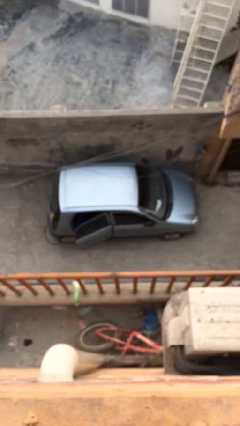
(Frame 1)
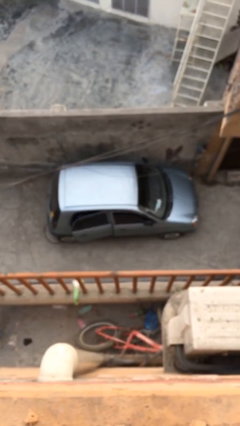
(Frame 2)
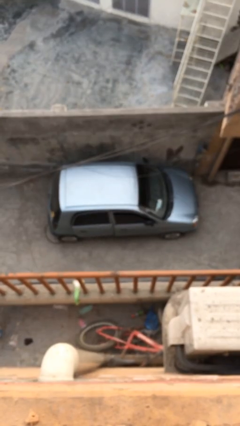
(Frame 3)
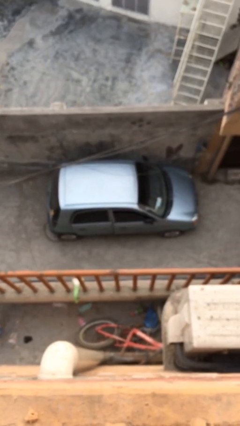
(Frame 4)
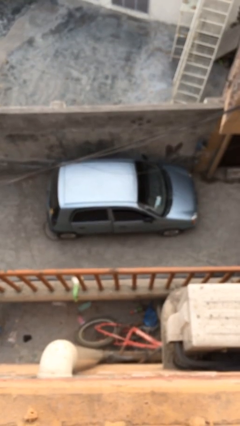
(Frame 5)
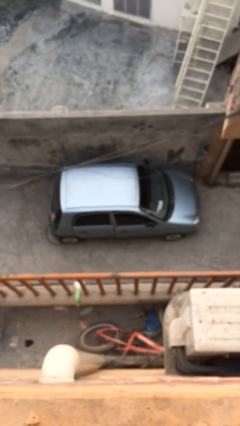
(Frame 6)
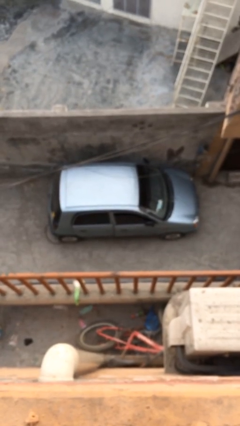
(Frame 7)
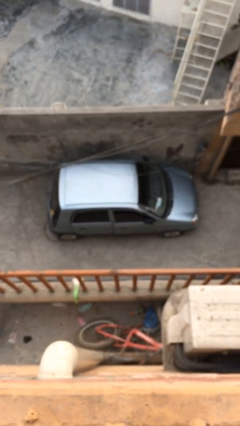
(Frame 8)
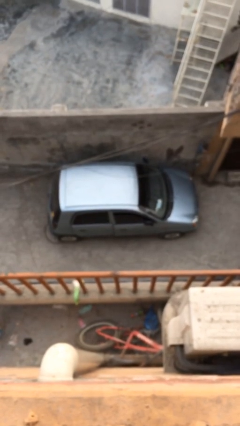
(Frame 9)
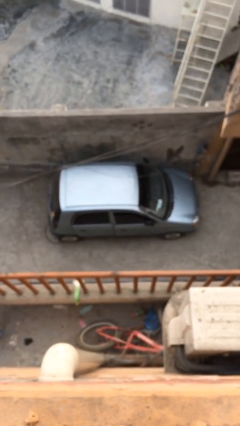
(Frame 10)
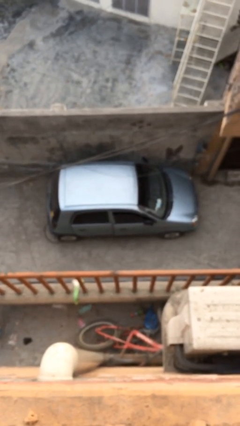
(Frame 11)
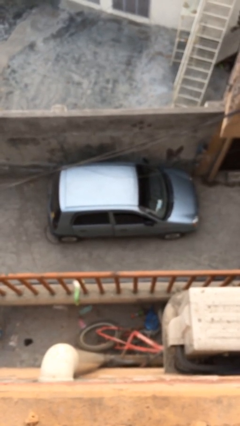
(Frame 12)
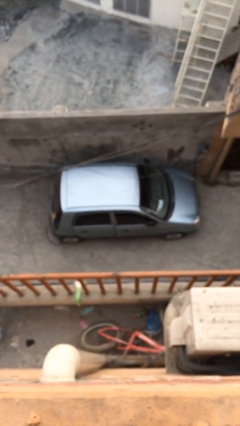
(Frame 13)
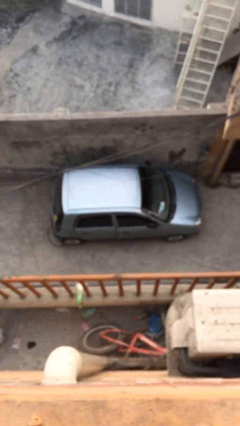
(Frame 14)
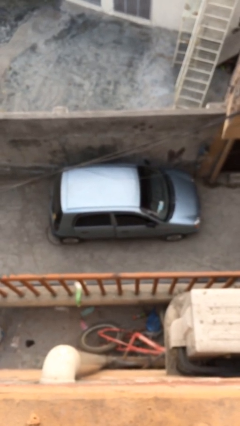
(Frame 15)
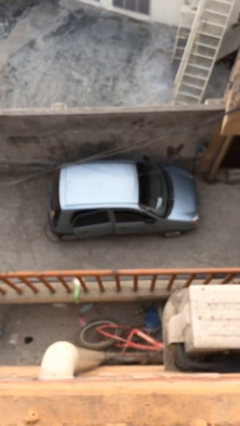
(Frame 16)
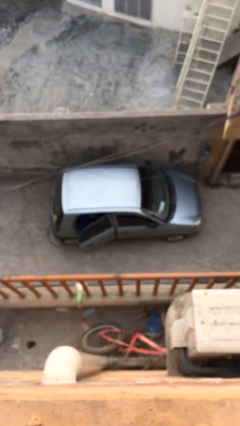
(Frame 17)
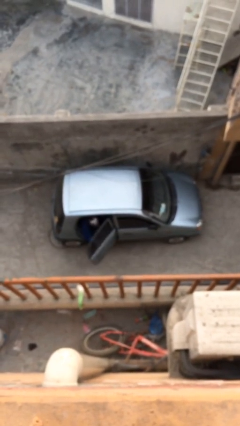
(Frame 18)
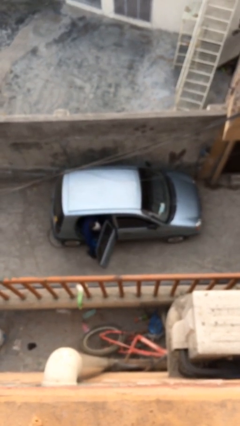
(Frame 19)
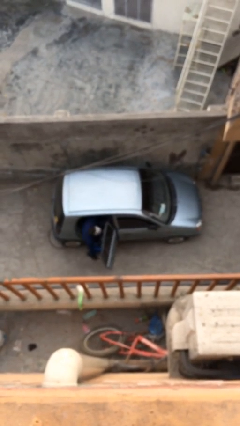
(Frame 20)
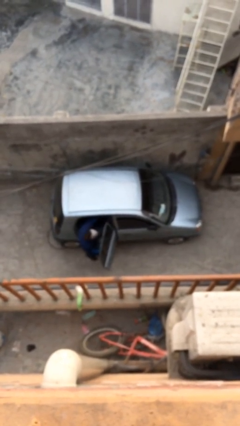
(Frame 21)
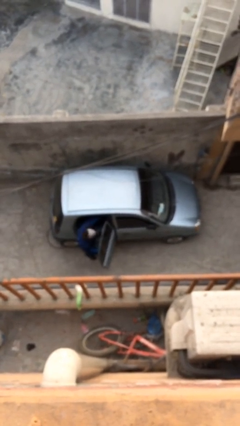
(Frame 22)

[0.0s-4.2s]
car drops off person

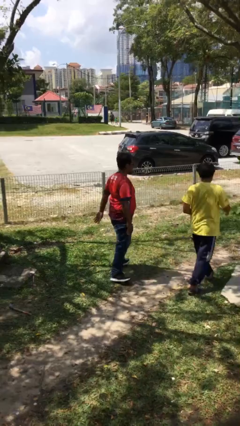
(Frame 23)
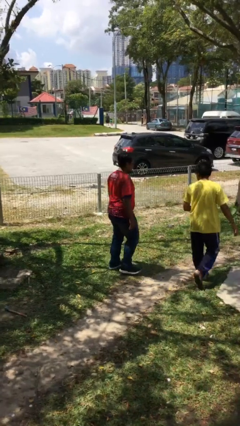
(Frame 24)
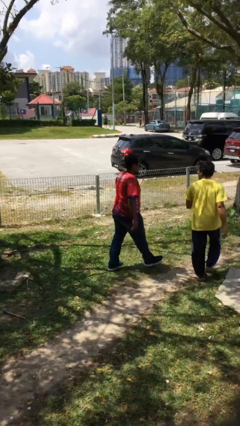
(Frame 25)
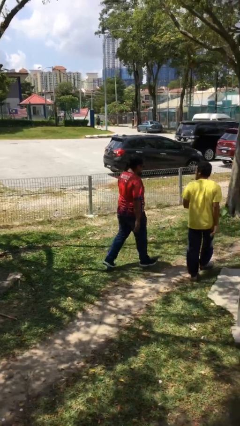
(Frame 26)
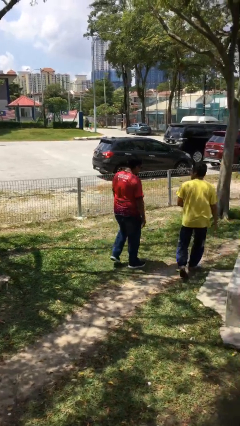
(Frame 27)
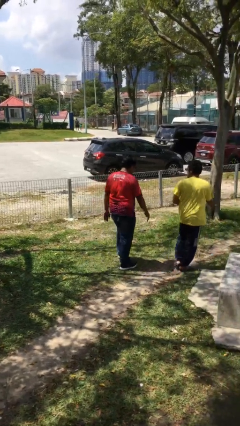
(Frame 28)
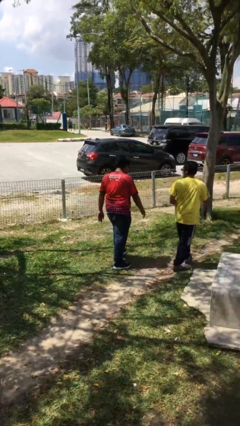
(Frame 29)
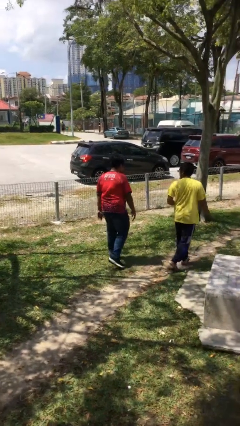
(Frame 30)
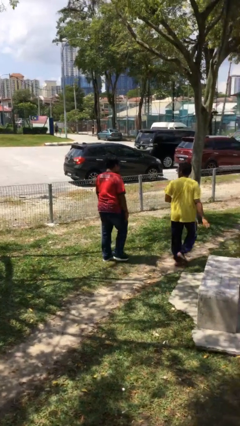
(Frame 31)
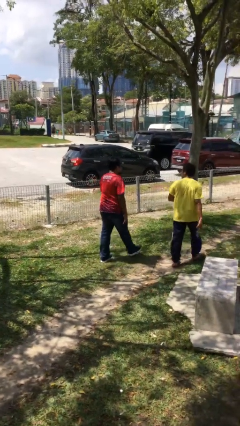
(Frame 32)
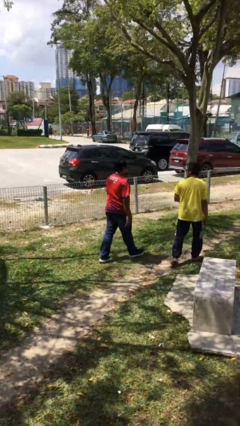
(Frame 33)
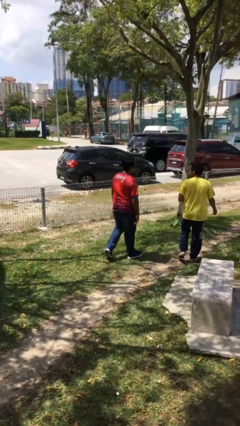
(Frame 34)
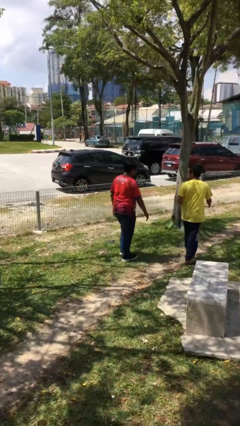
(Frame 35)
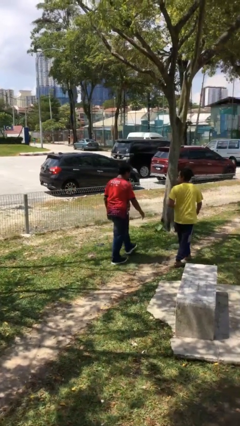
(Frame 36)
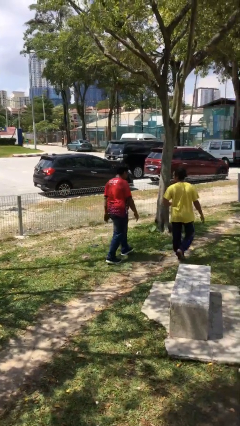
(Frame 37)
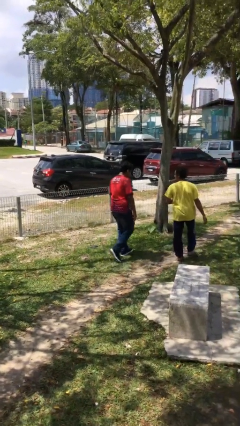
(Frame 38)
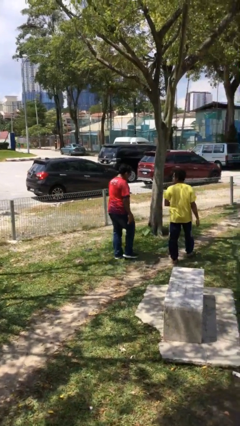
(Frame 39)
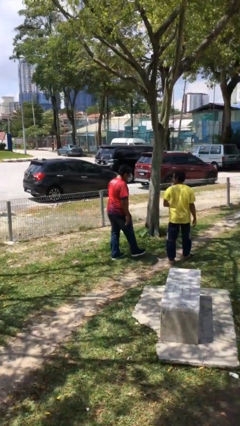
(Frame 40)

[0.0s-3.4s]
person talks to person

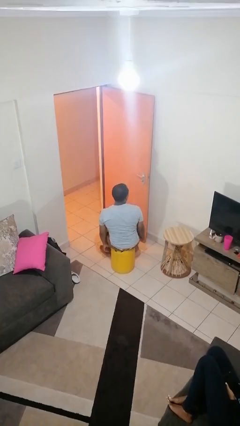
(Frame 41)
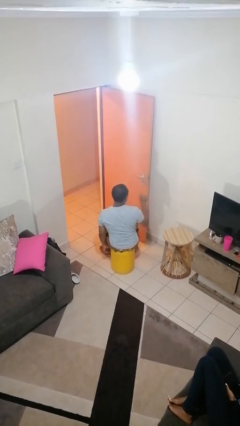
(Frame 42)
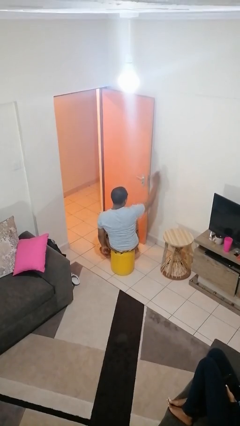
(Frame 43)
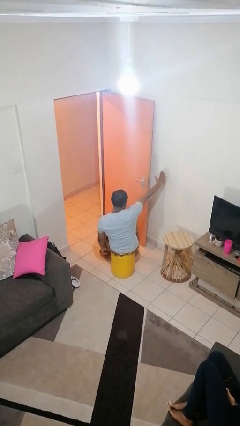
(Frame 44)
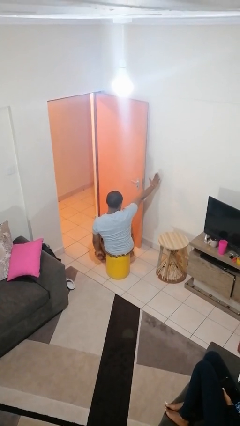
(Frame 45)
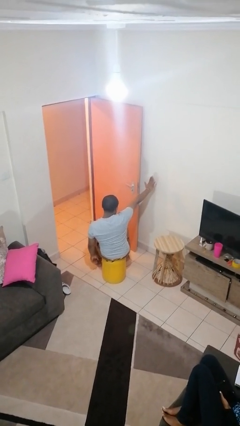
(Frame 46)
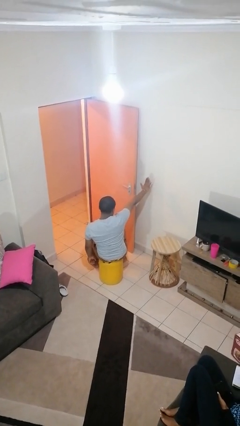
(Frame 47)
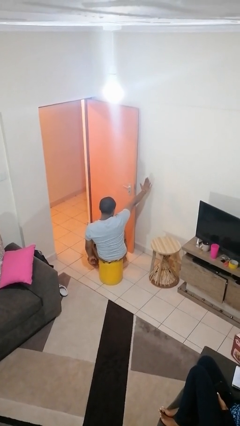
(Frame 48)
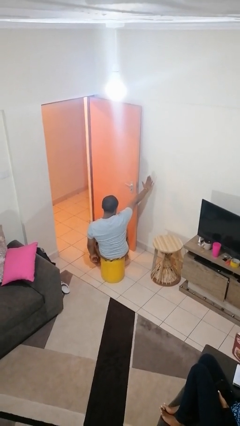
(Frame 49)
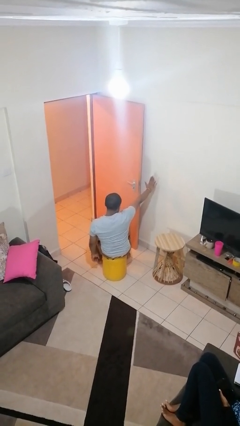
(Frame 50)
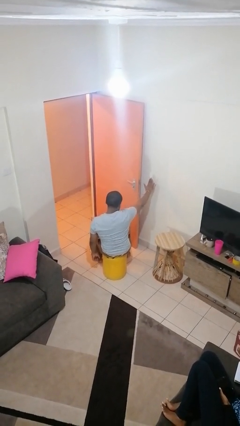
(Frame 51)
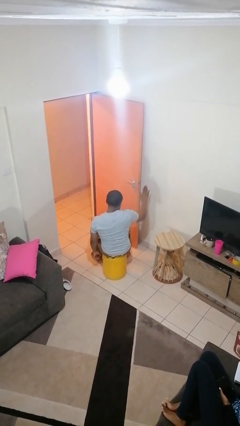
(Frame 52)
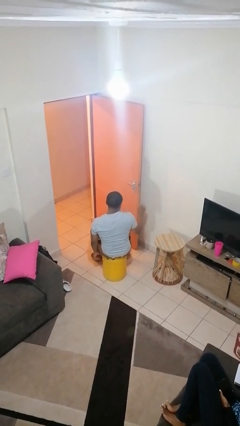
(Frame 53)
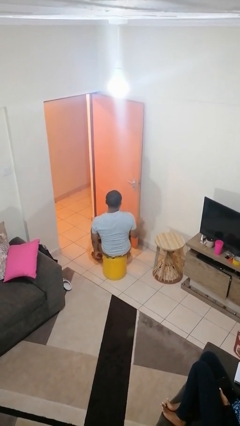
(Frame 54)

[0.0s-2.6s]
person gestures stop

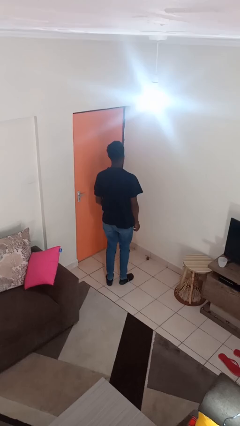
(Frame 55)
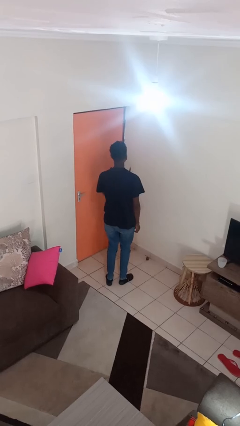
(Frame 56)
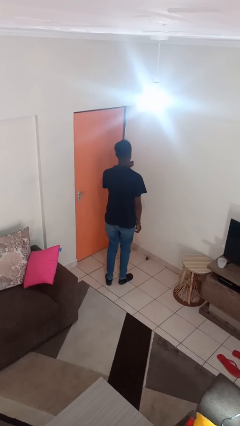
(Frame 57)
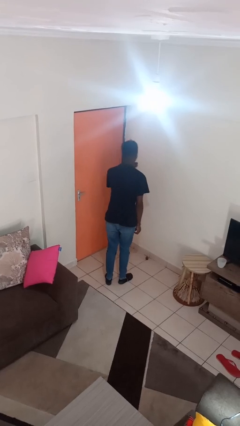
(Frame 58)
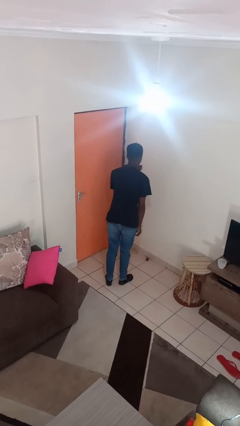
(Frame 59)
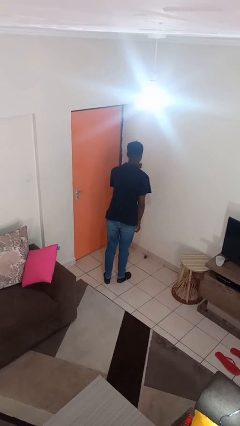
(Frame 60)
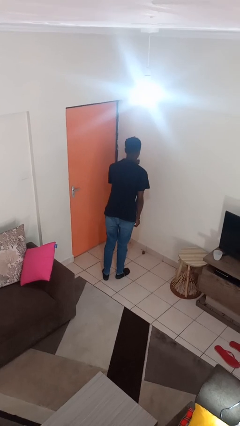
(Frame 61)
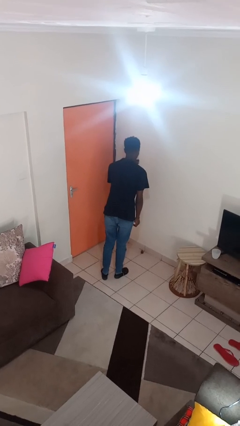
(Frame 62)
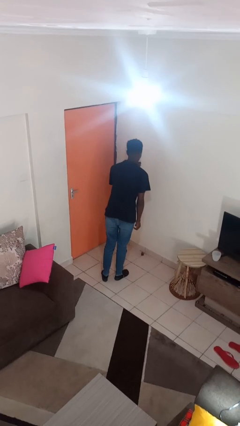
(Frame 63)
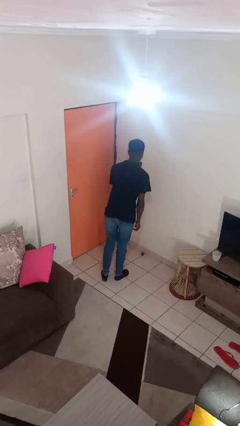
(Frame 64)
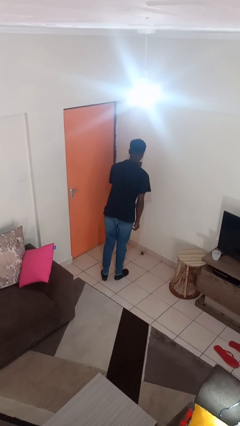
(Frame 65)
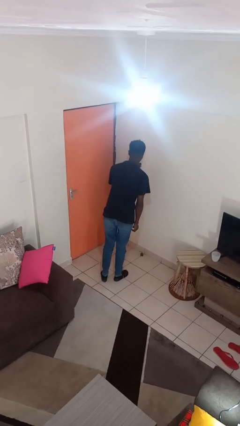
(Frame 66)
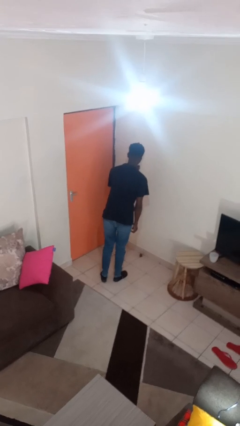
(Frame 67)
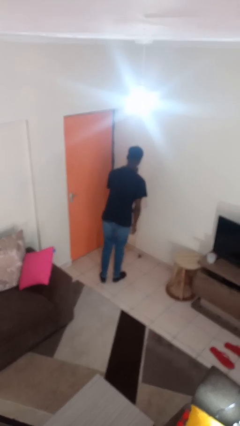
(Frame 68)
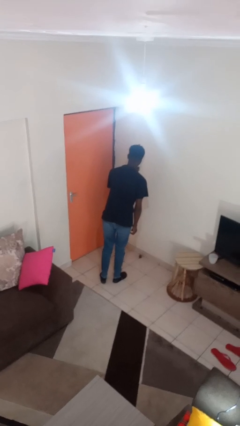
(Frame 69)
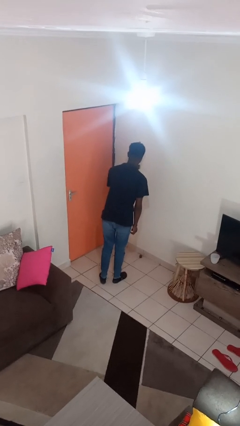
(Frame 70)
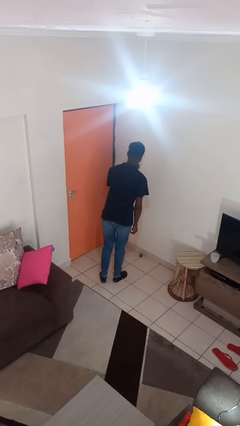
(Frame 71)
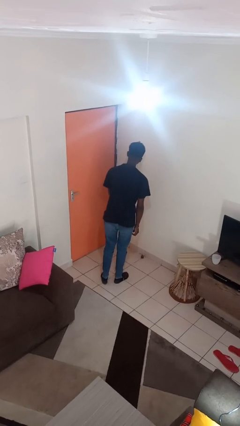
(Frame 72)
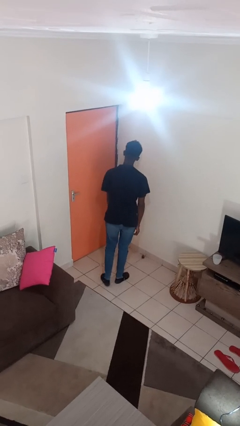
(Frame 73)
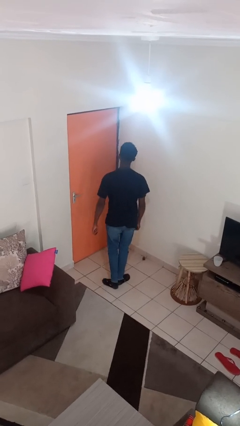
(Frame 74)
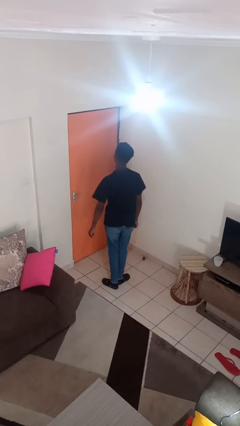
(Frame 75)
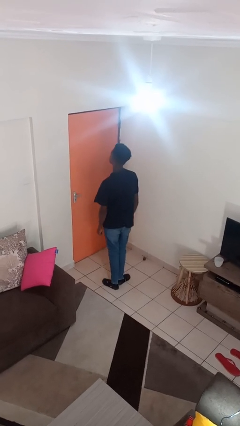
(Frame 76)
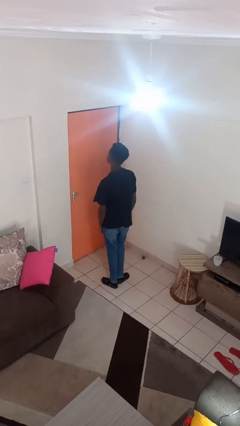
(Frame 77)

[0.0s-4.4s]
person gestures be quiet

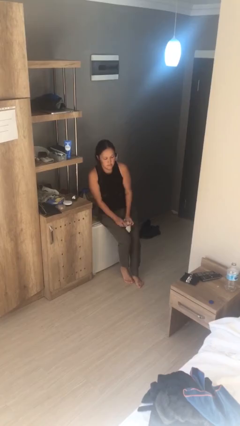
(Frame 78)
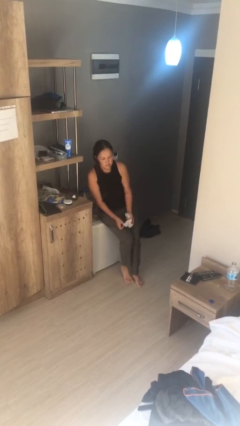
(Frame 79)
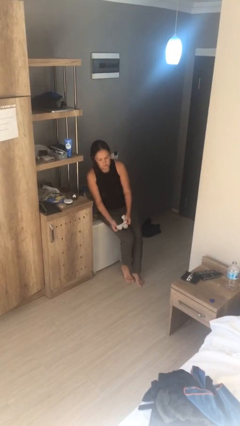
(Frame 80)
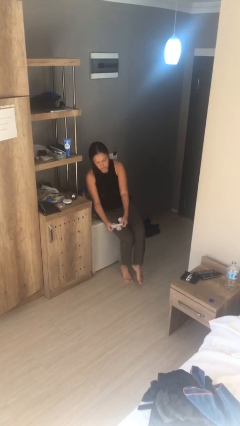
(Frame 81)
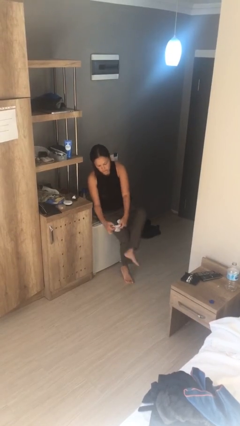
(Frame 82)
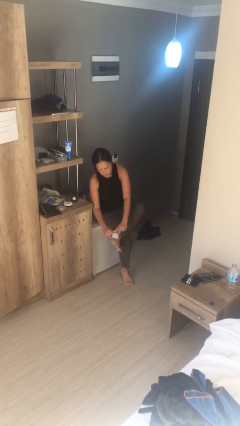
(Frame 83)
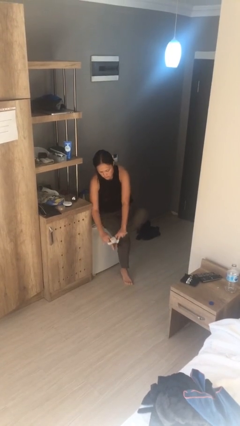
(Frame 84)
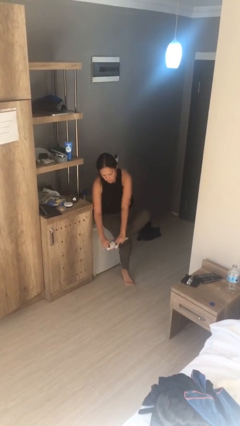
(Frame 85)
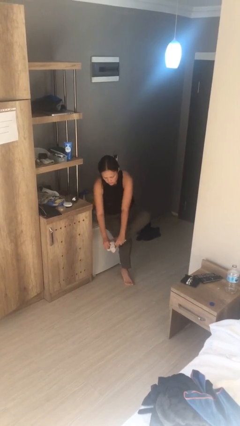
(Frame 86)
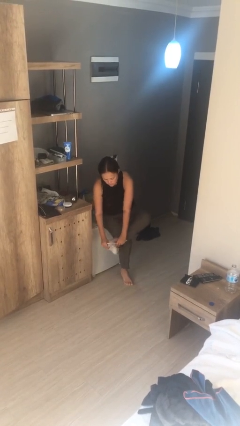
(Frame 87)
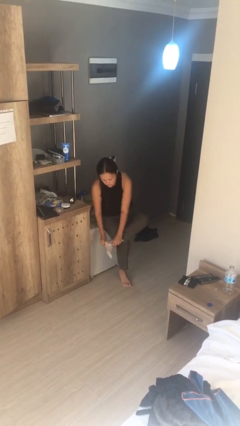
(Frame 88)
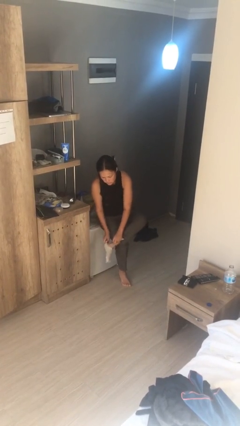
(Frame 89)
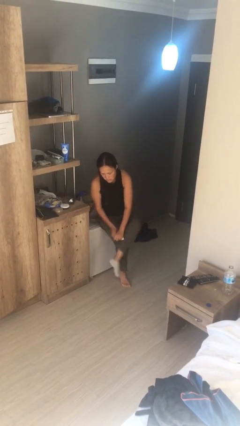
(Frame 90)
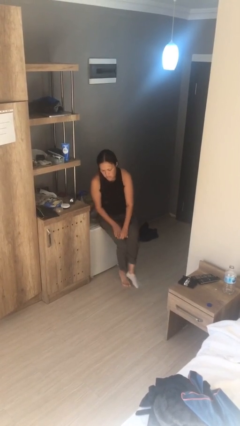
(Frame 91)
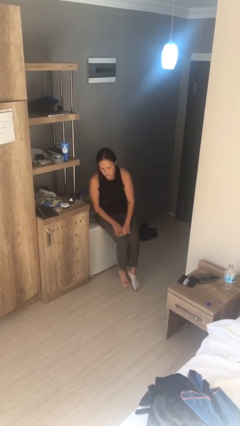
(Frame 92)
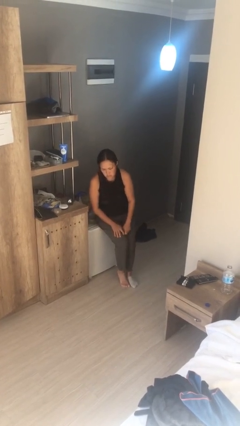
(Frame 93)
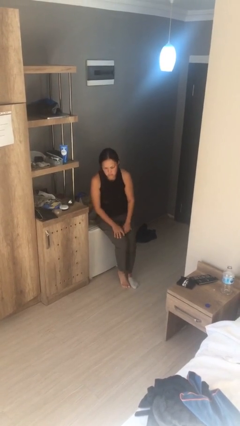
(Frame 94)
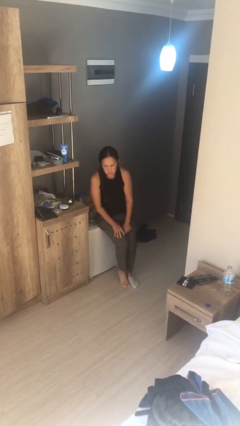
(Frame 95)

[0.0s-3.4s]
person puts on socks
